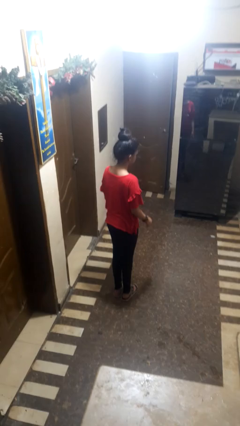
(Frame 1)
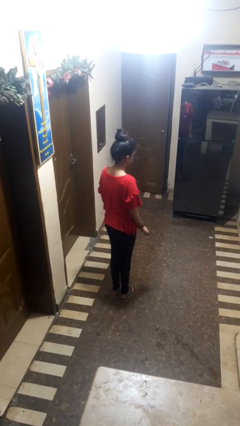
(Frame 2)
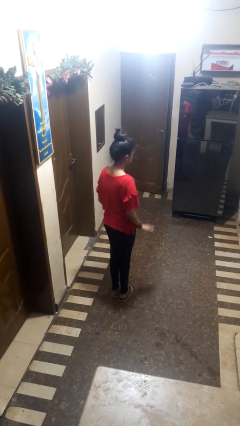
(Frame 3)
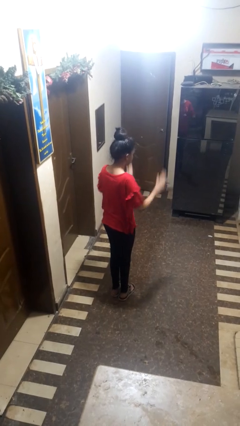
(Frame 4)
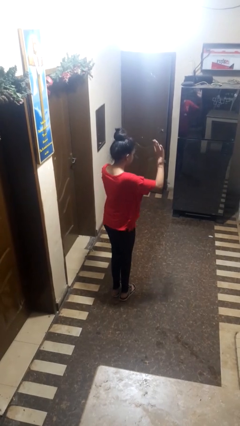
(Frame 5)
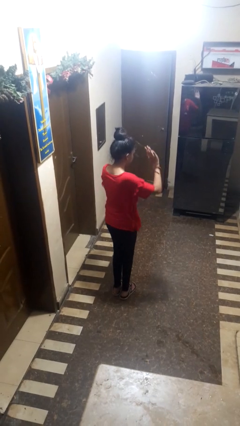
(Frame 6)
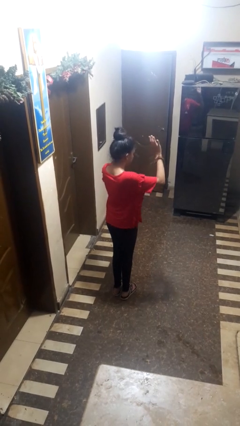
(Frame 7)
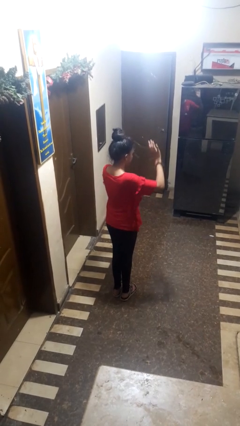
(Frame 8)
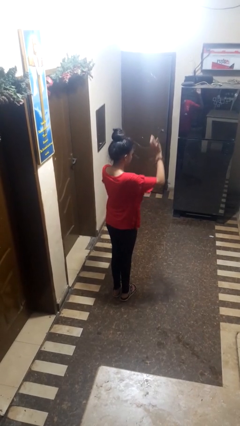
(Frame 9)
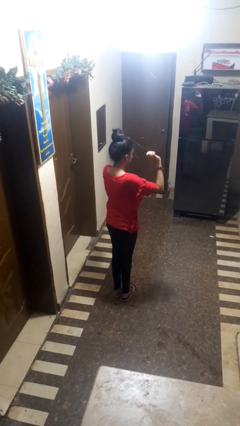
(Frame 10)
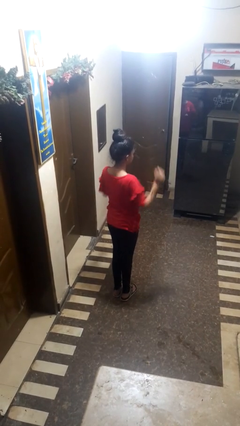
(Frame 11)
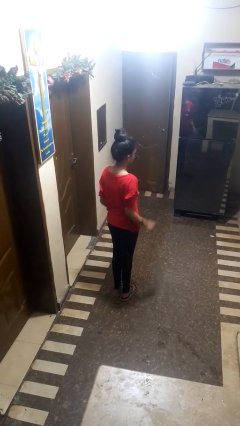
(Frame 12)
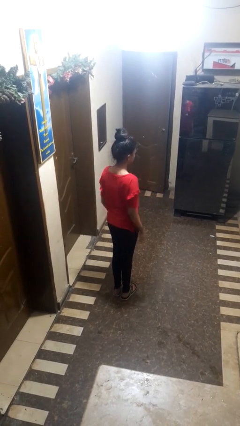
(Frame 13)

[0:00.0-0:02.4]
person dances in place

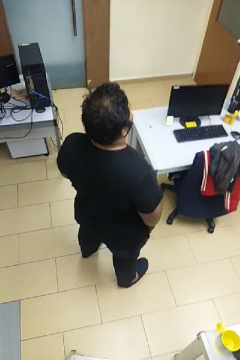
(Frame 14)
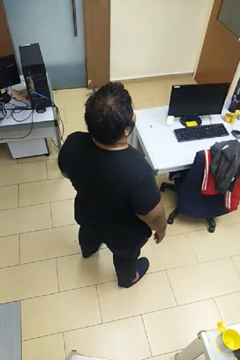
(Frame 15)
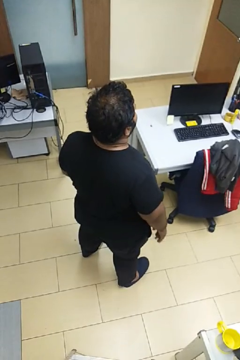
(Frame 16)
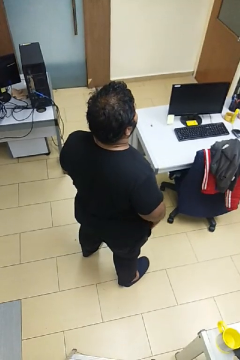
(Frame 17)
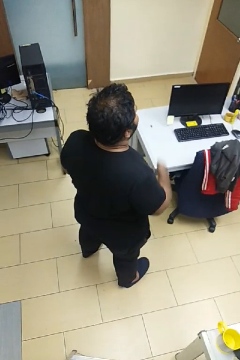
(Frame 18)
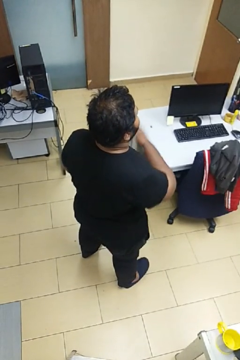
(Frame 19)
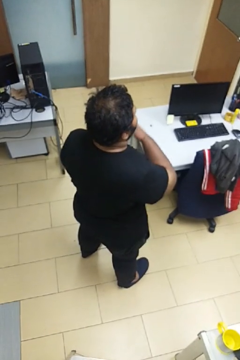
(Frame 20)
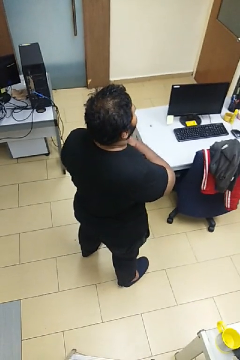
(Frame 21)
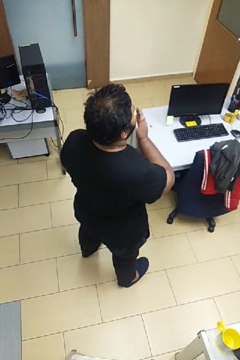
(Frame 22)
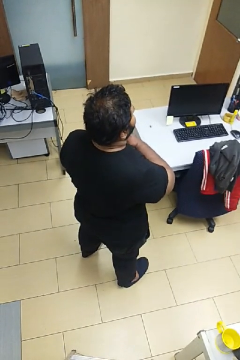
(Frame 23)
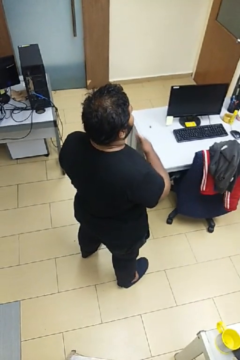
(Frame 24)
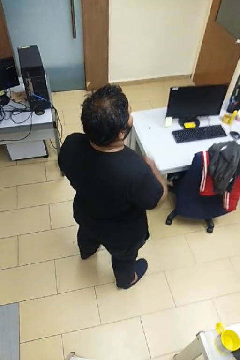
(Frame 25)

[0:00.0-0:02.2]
person drums on chest

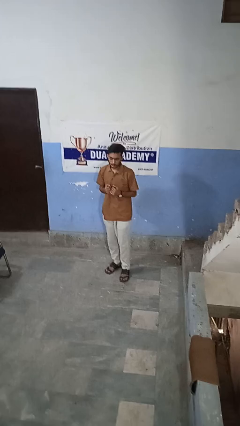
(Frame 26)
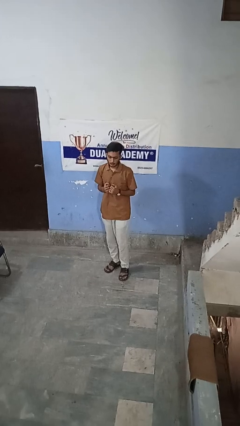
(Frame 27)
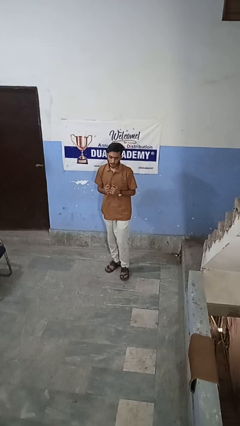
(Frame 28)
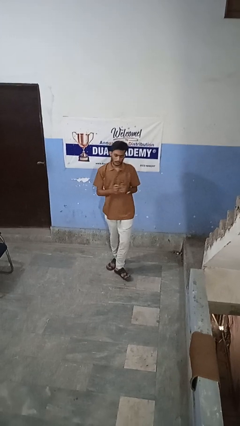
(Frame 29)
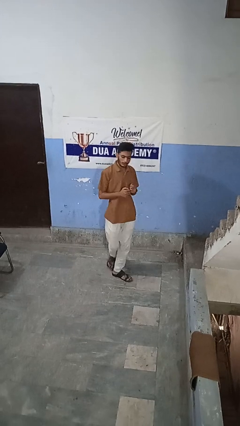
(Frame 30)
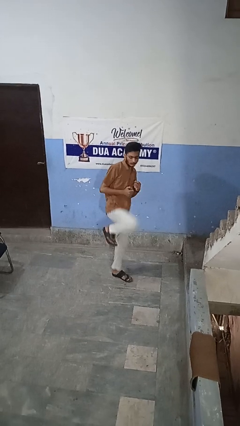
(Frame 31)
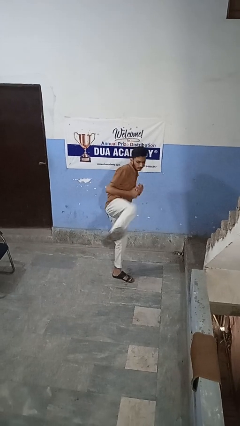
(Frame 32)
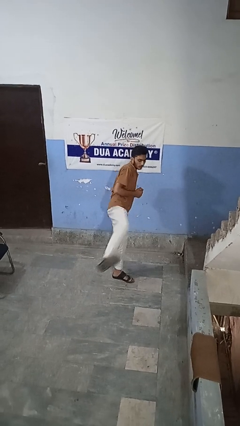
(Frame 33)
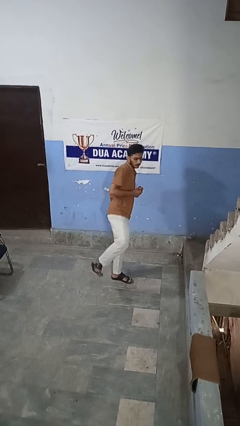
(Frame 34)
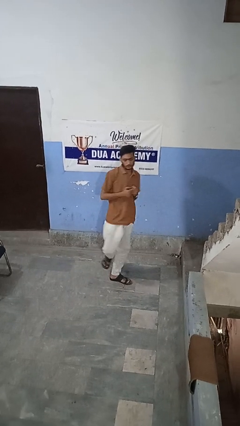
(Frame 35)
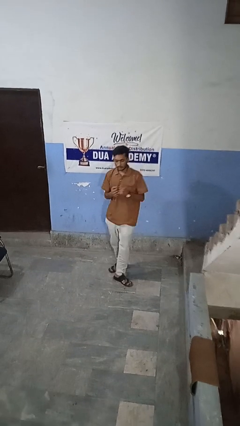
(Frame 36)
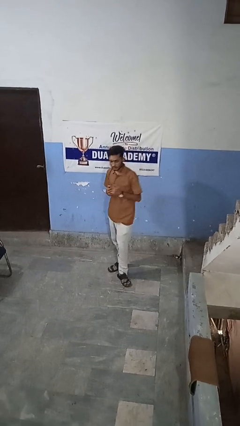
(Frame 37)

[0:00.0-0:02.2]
person karate kicks

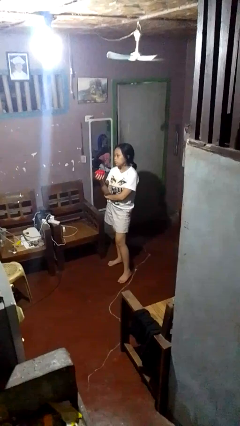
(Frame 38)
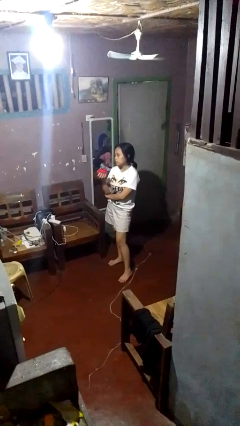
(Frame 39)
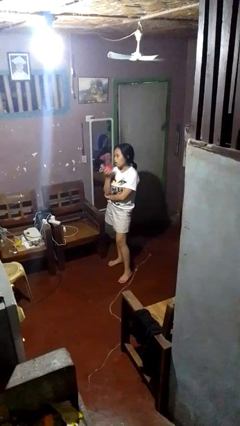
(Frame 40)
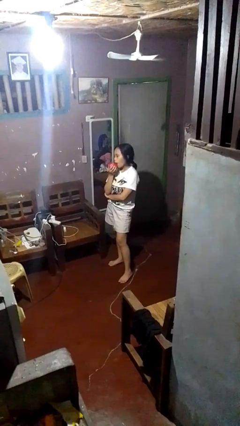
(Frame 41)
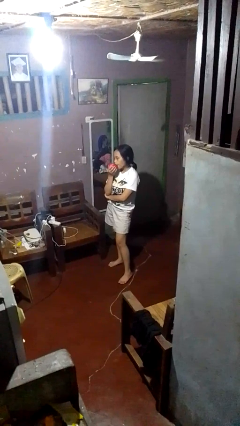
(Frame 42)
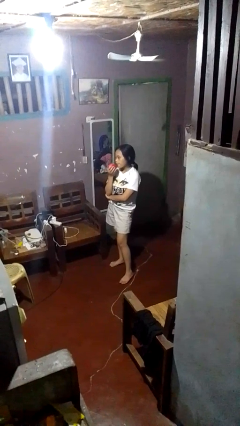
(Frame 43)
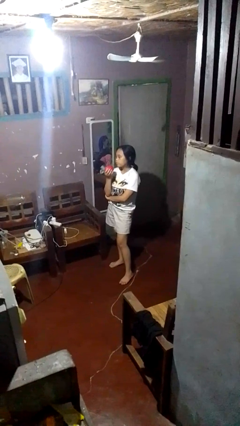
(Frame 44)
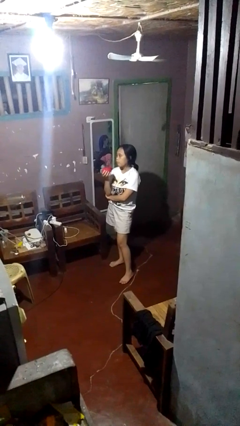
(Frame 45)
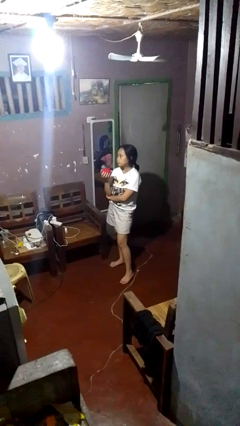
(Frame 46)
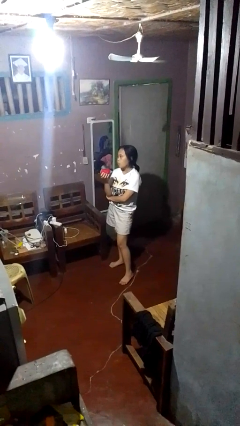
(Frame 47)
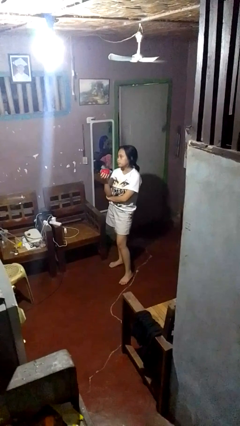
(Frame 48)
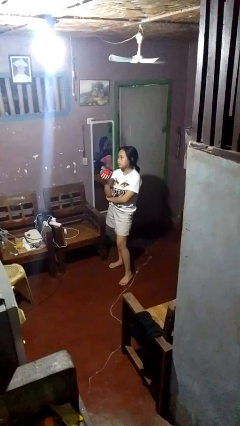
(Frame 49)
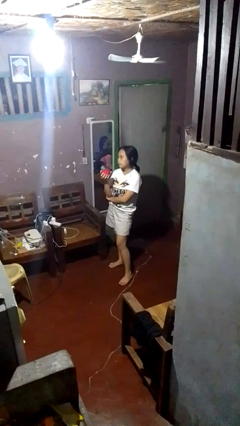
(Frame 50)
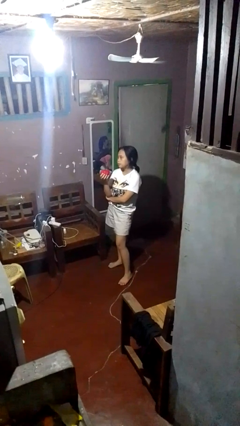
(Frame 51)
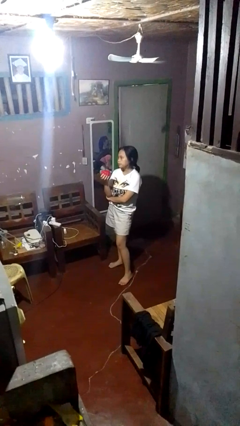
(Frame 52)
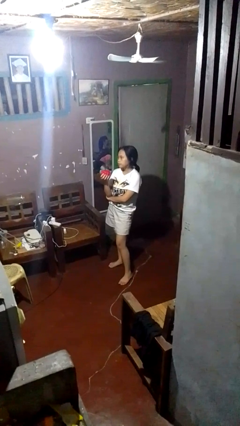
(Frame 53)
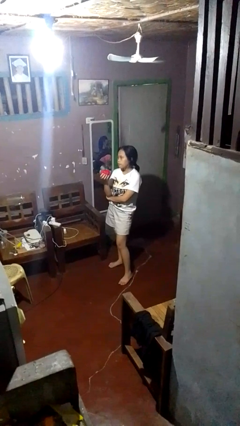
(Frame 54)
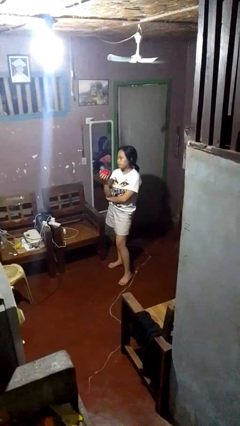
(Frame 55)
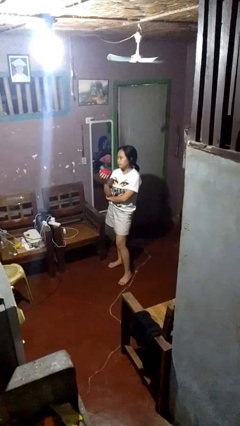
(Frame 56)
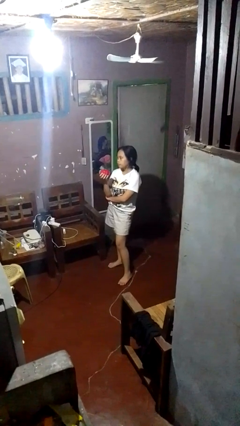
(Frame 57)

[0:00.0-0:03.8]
person eats apple

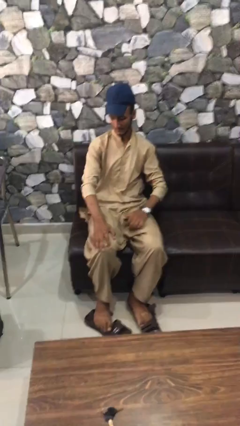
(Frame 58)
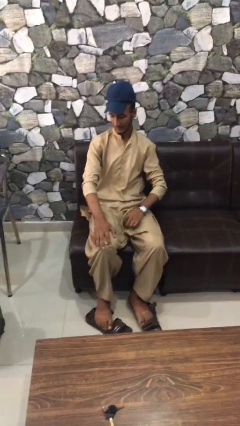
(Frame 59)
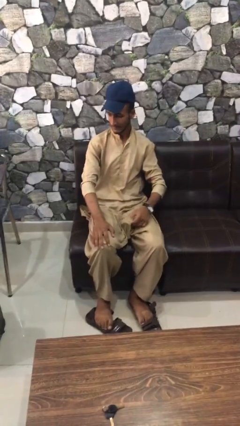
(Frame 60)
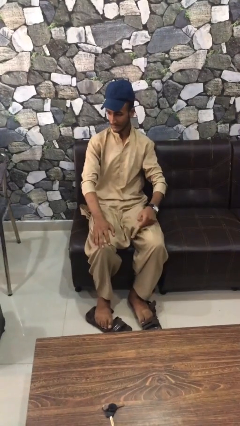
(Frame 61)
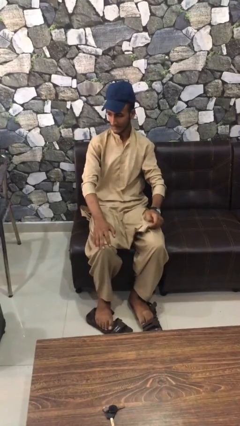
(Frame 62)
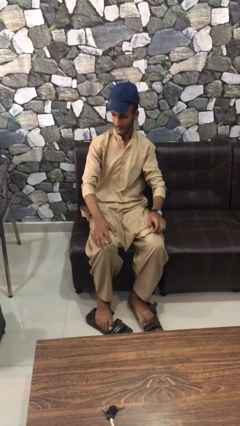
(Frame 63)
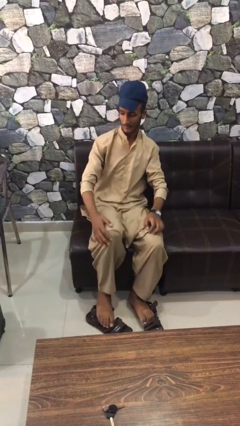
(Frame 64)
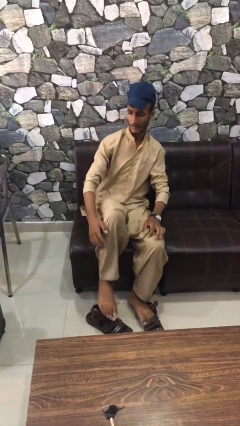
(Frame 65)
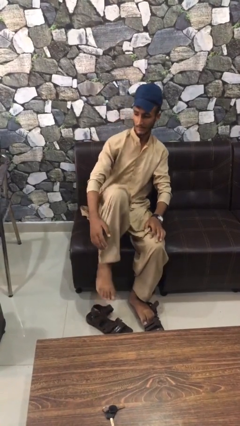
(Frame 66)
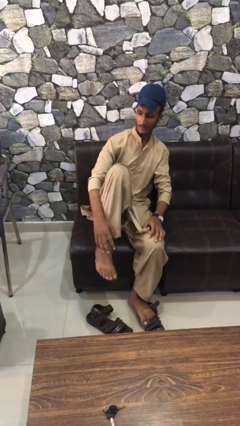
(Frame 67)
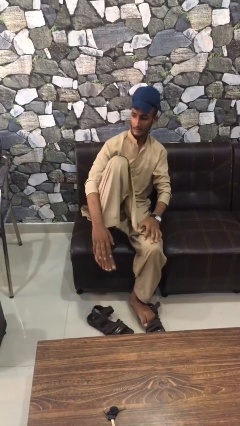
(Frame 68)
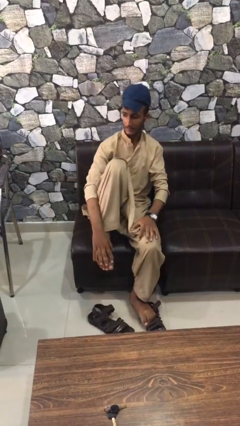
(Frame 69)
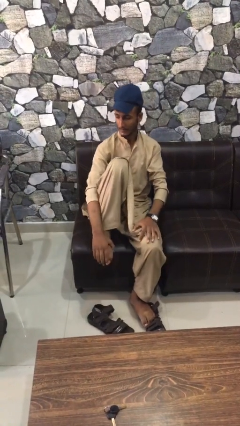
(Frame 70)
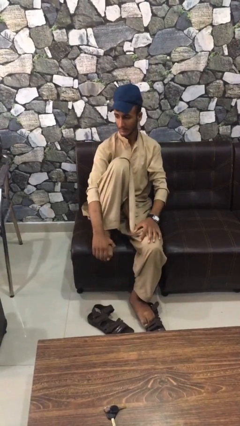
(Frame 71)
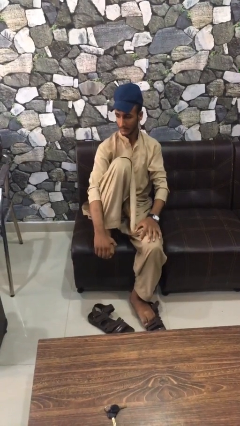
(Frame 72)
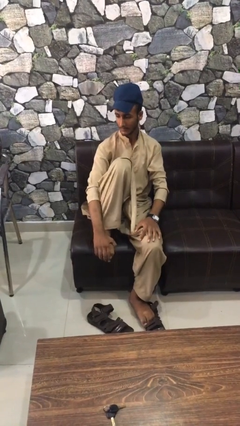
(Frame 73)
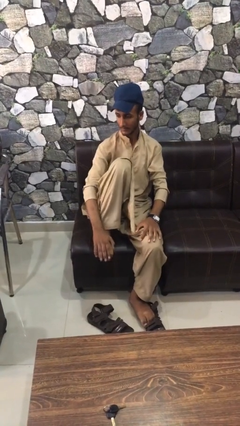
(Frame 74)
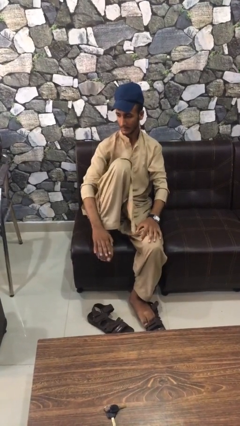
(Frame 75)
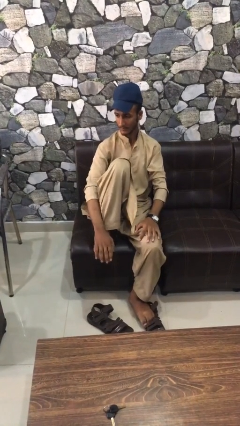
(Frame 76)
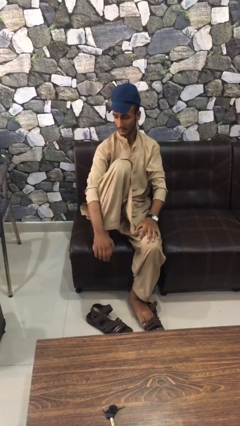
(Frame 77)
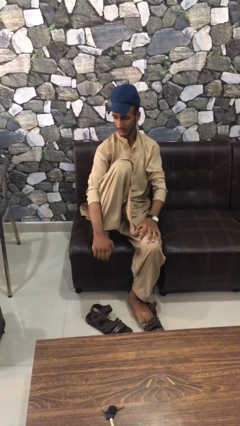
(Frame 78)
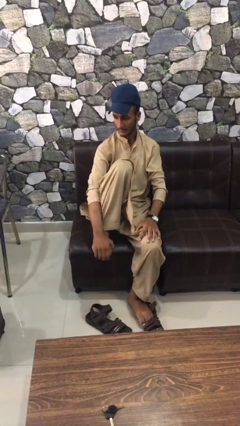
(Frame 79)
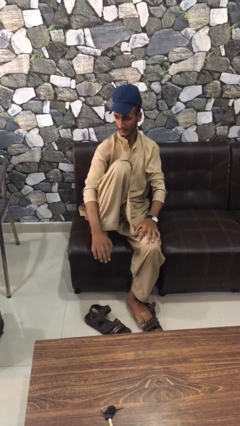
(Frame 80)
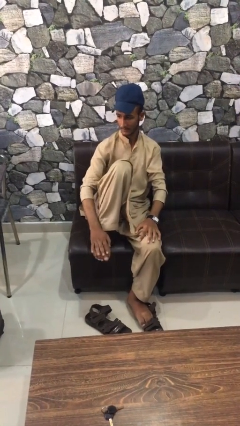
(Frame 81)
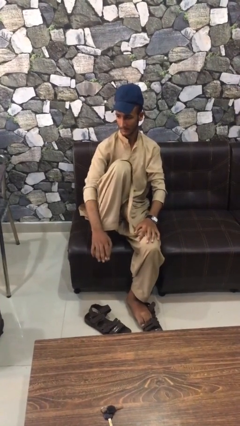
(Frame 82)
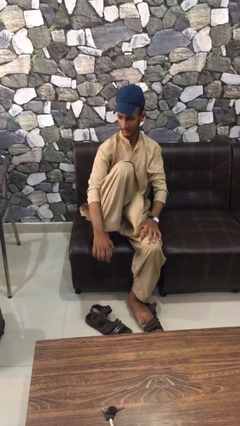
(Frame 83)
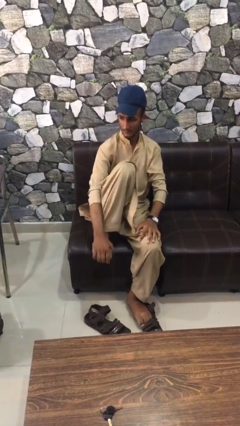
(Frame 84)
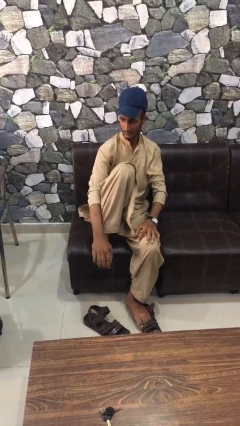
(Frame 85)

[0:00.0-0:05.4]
person rubs foot

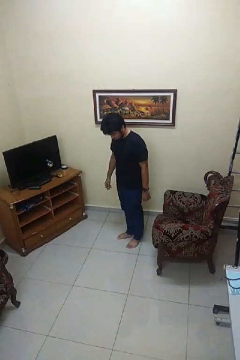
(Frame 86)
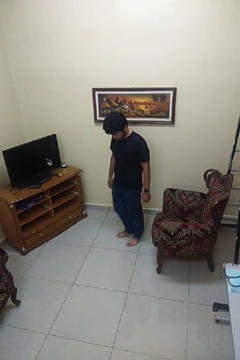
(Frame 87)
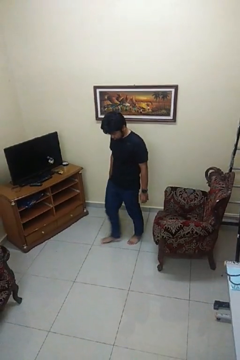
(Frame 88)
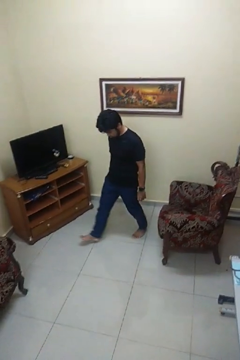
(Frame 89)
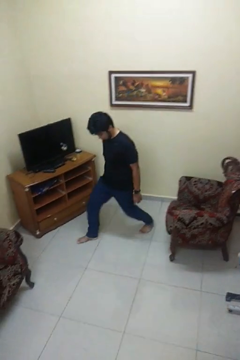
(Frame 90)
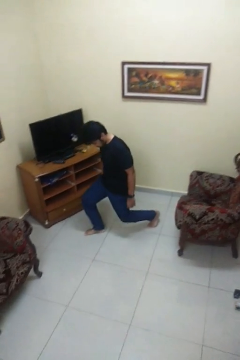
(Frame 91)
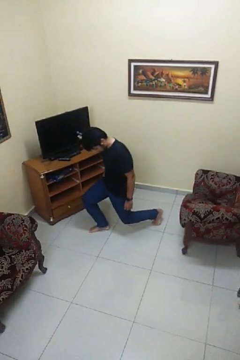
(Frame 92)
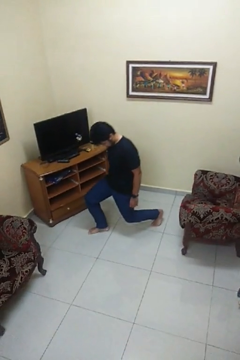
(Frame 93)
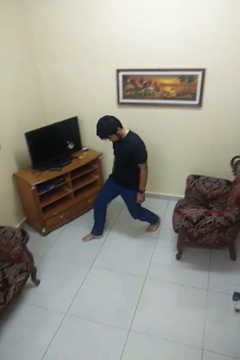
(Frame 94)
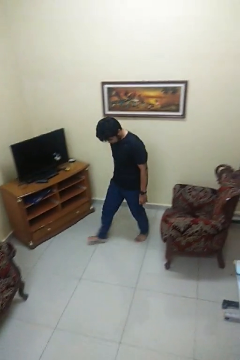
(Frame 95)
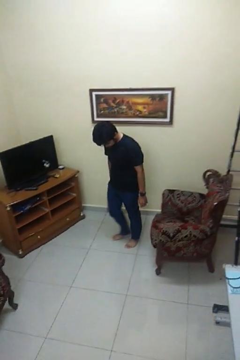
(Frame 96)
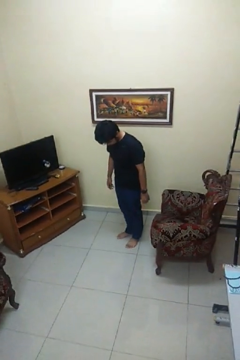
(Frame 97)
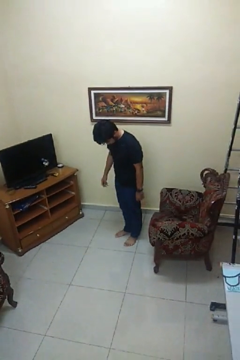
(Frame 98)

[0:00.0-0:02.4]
person exercises with lunges
